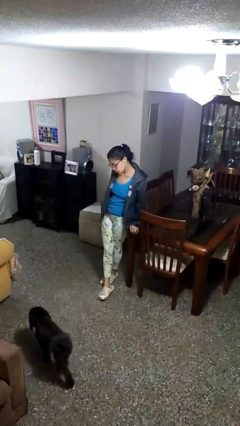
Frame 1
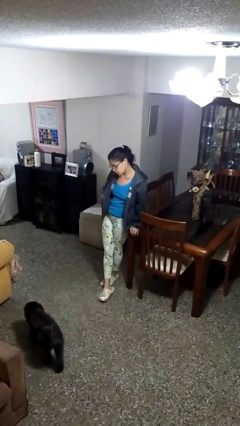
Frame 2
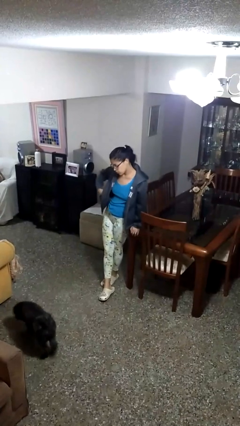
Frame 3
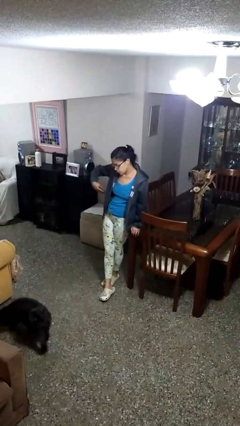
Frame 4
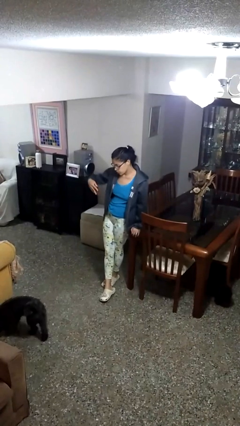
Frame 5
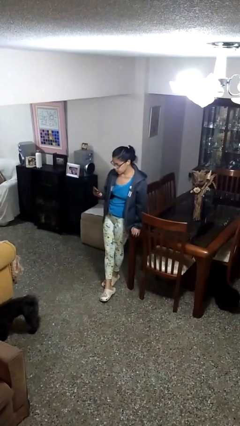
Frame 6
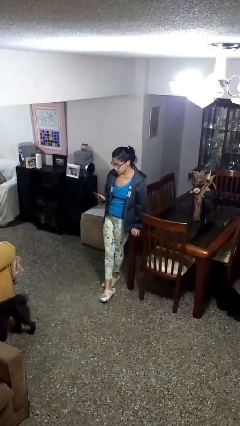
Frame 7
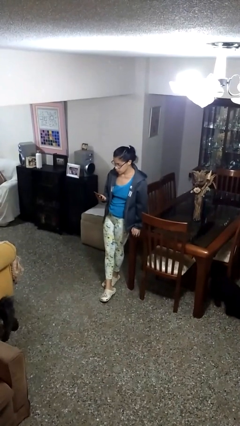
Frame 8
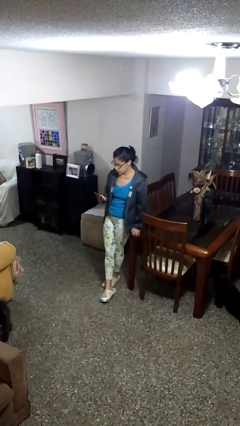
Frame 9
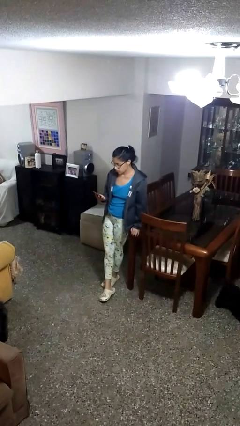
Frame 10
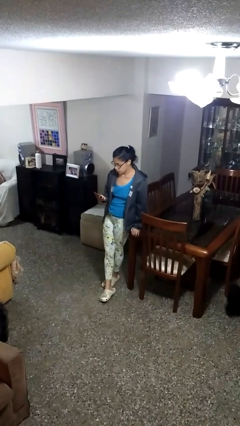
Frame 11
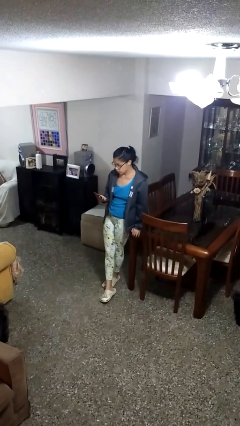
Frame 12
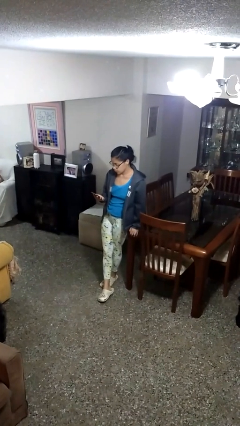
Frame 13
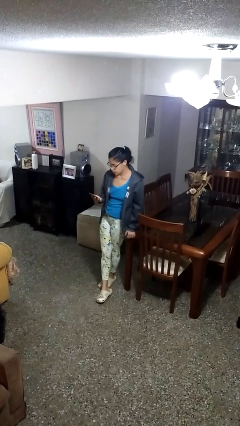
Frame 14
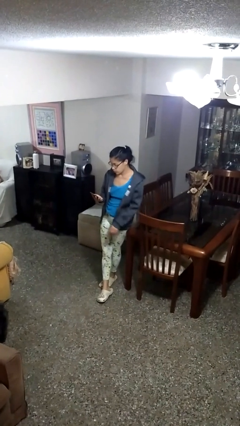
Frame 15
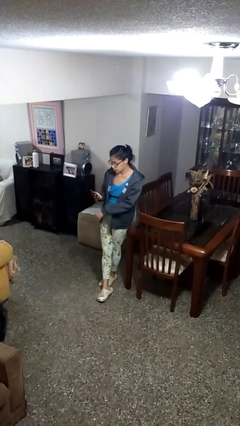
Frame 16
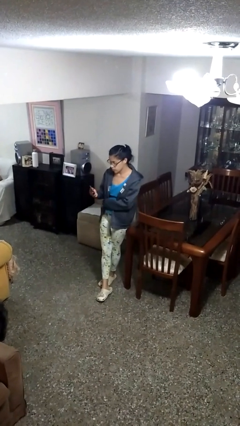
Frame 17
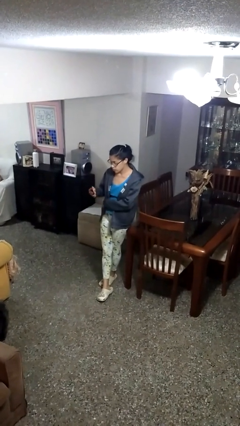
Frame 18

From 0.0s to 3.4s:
person takes phone from pocket

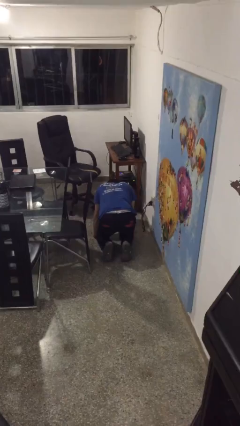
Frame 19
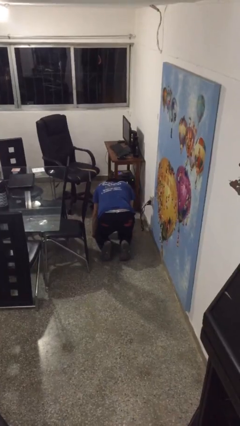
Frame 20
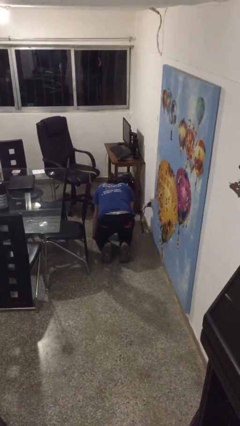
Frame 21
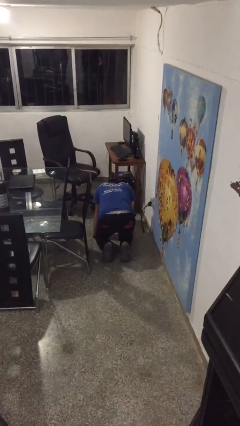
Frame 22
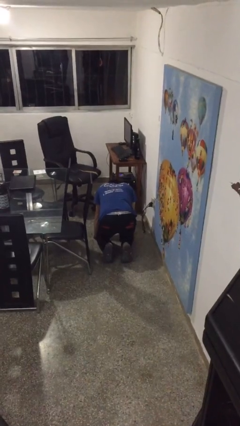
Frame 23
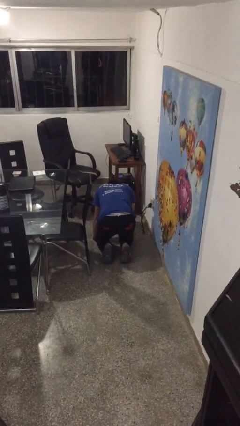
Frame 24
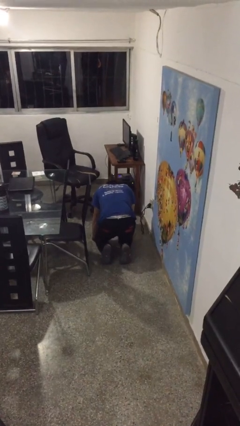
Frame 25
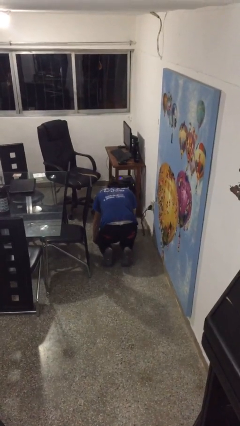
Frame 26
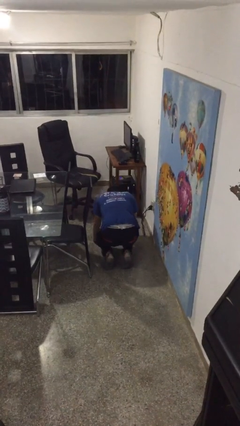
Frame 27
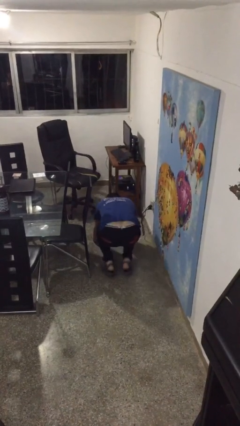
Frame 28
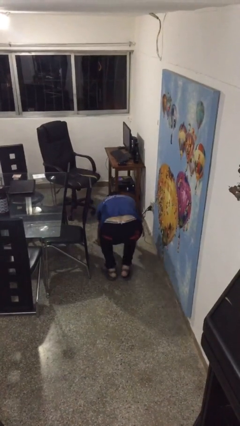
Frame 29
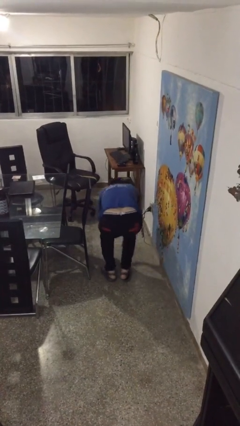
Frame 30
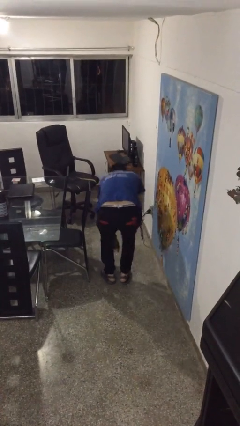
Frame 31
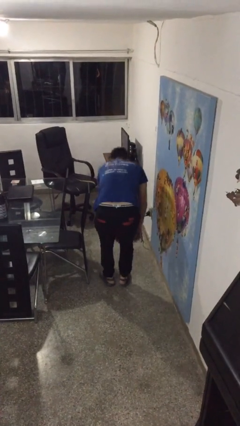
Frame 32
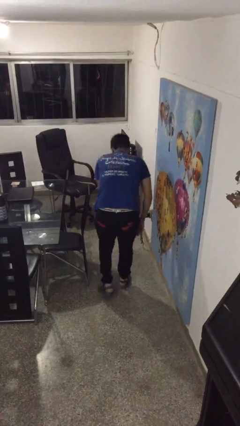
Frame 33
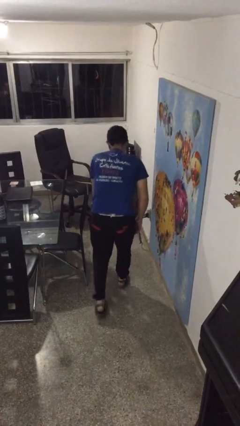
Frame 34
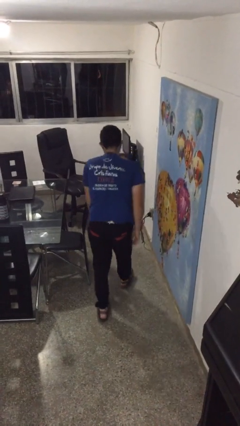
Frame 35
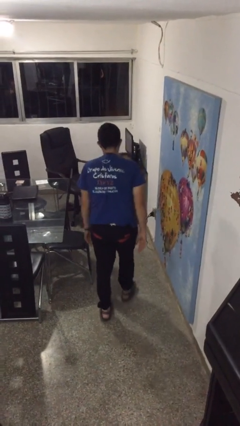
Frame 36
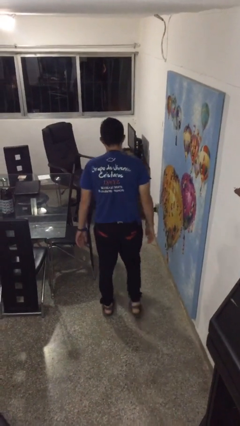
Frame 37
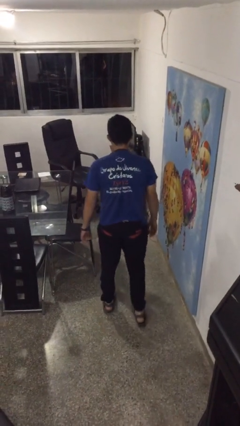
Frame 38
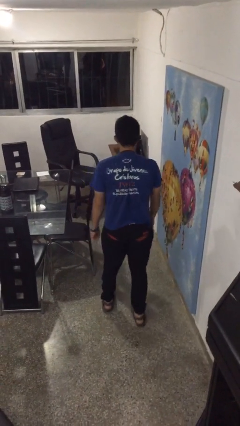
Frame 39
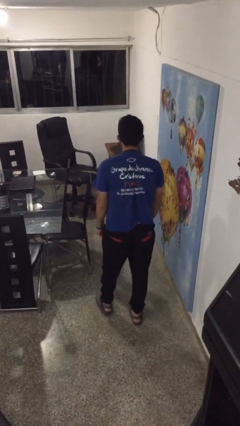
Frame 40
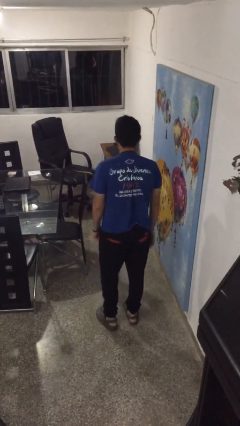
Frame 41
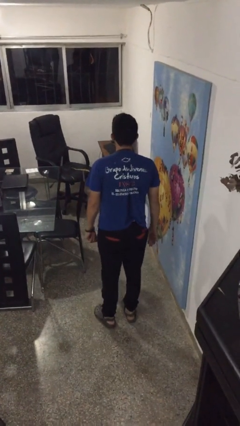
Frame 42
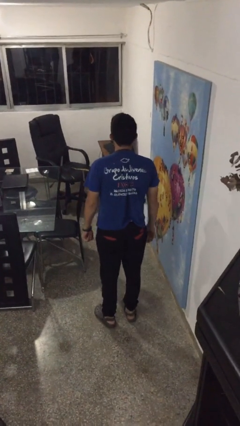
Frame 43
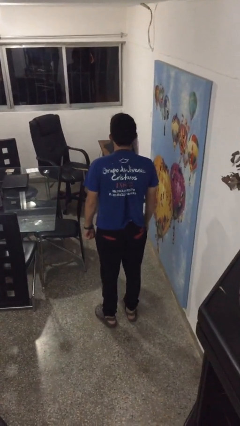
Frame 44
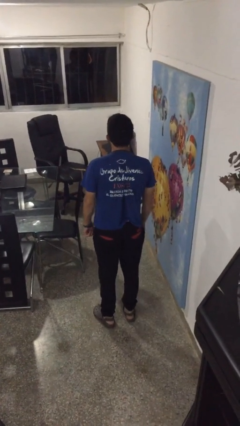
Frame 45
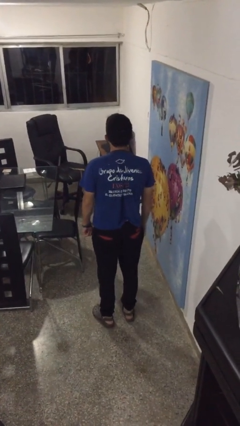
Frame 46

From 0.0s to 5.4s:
person stands up from floor

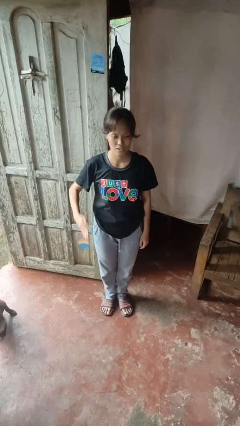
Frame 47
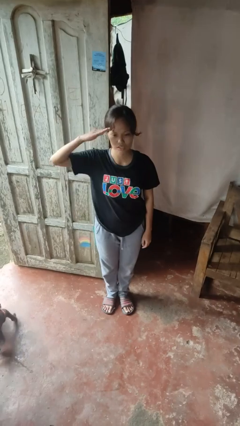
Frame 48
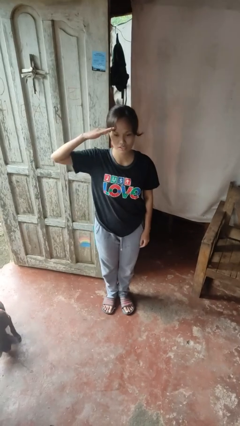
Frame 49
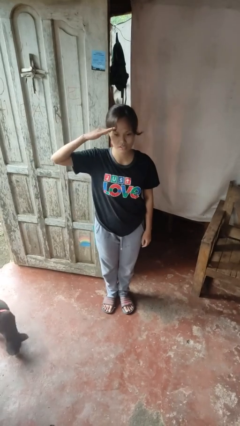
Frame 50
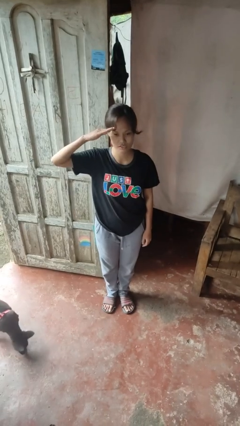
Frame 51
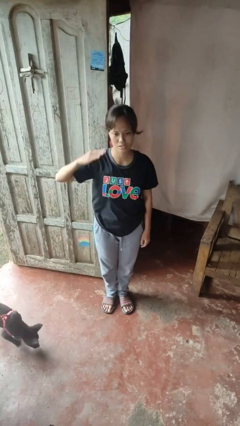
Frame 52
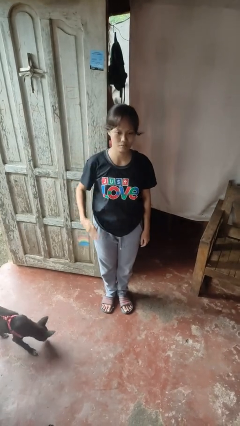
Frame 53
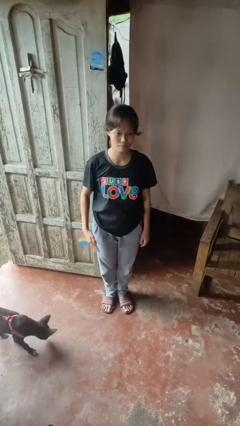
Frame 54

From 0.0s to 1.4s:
person salutes

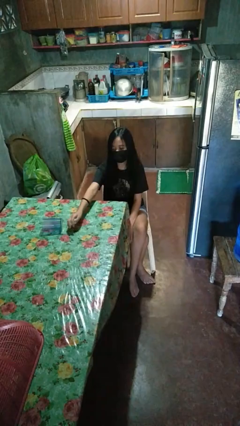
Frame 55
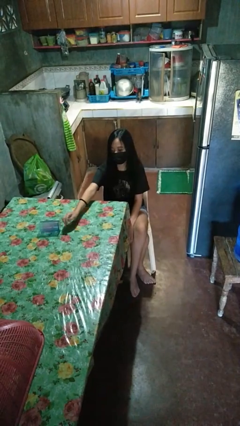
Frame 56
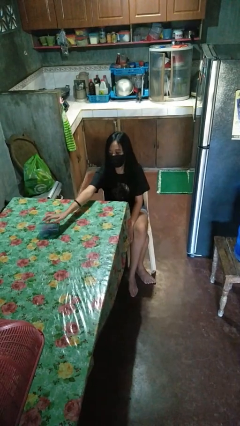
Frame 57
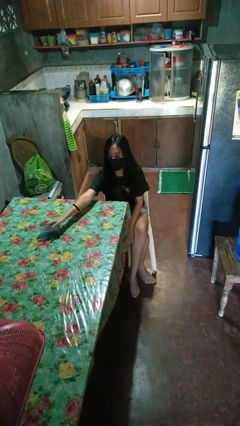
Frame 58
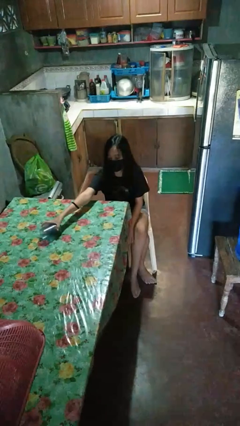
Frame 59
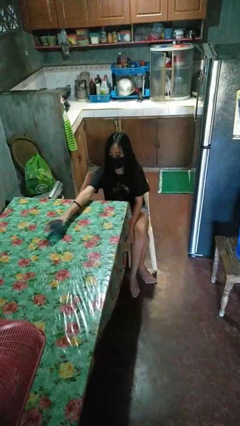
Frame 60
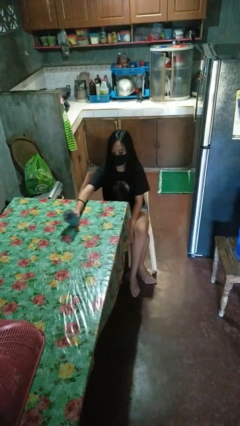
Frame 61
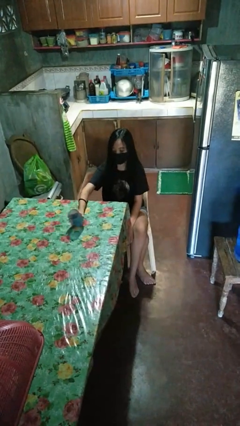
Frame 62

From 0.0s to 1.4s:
person sets upright glass

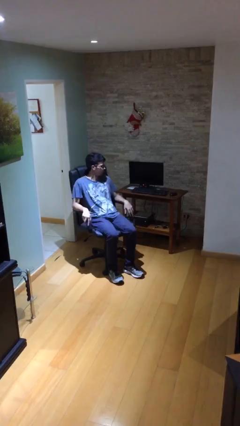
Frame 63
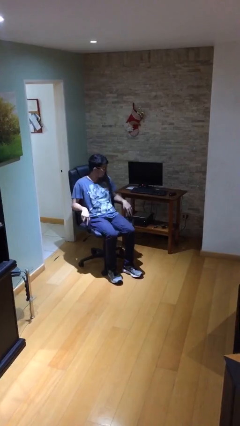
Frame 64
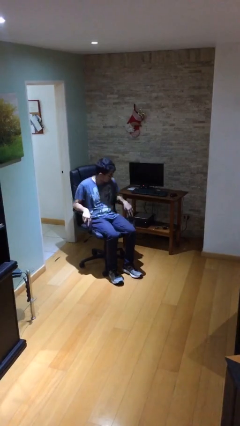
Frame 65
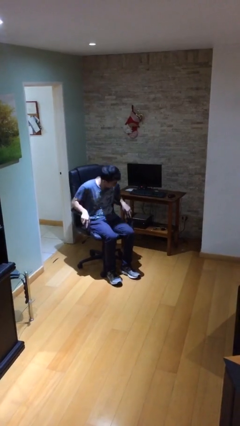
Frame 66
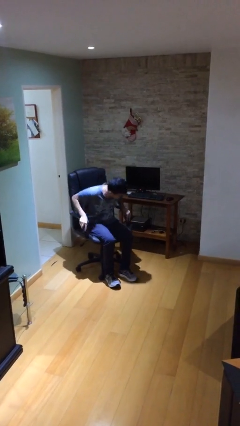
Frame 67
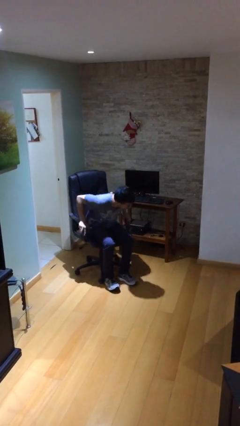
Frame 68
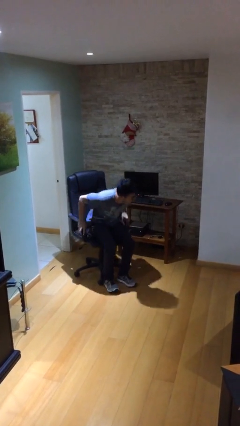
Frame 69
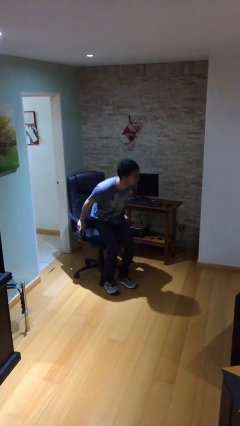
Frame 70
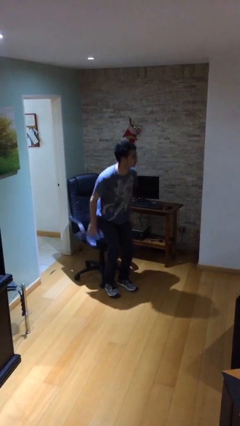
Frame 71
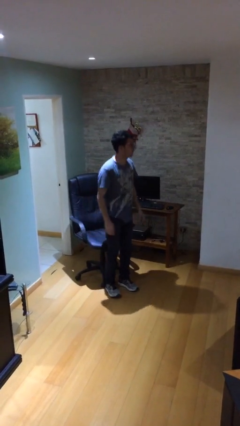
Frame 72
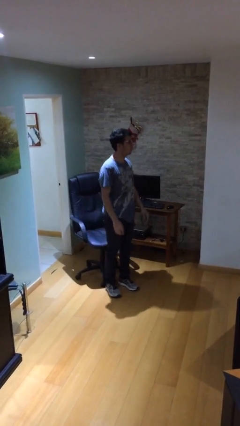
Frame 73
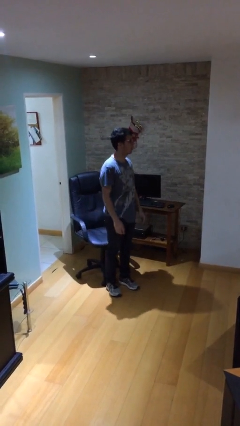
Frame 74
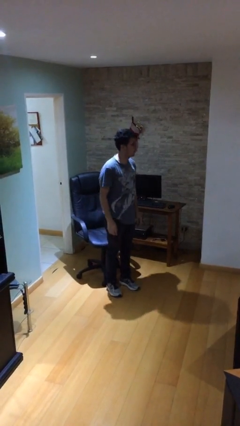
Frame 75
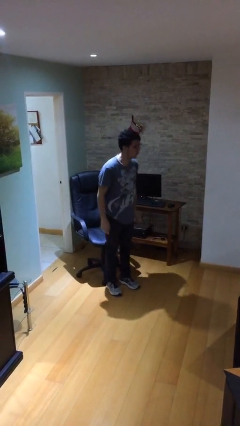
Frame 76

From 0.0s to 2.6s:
person stands up

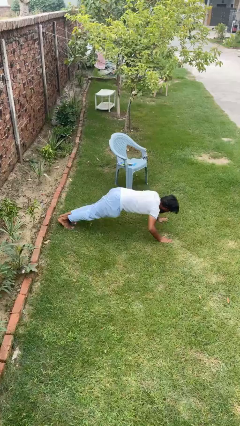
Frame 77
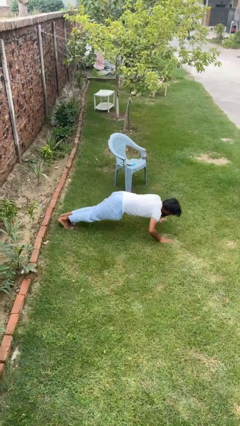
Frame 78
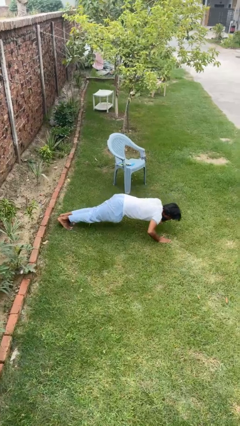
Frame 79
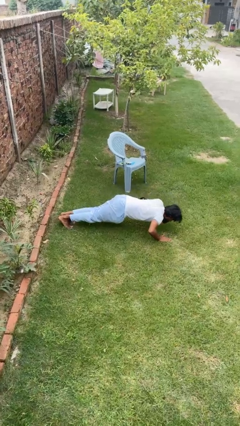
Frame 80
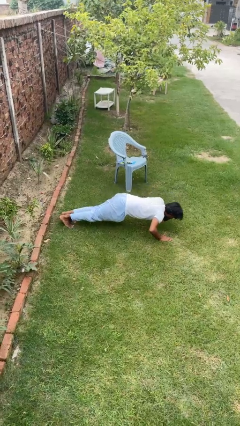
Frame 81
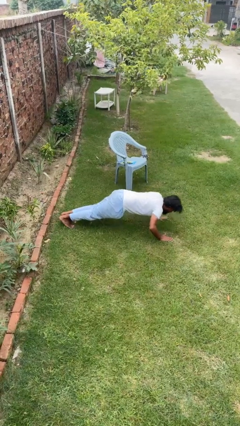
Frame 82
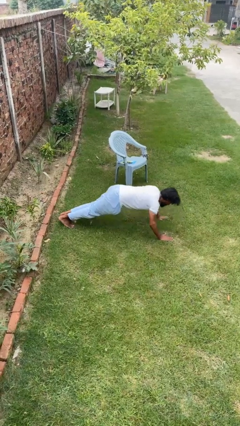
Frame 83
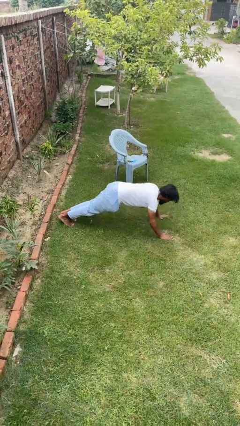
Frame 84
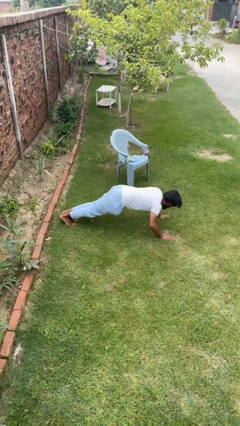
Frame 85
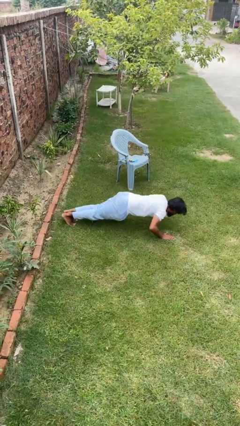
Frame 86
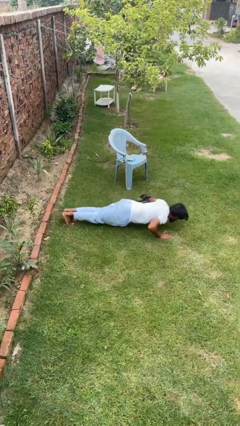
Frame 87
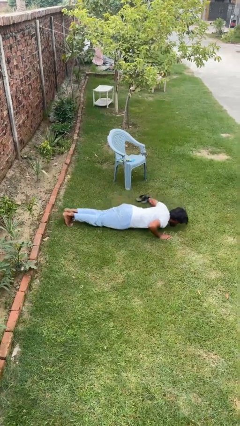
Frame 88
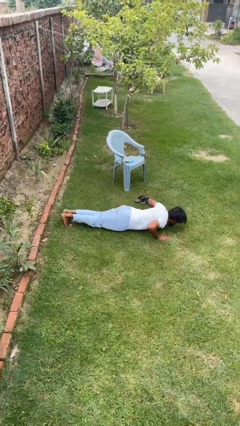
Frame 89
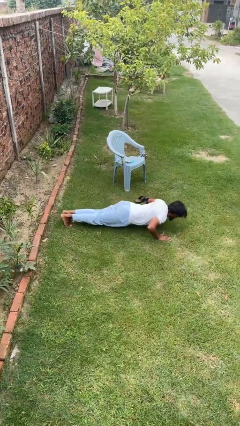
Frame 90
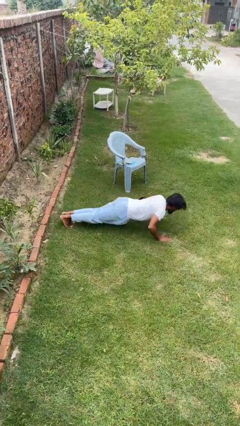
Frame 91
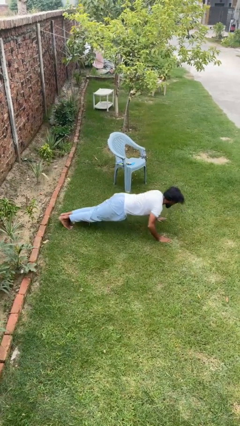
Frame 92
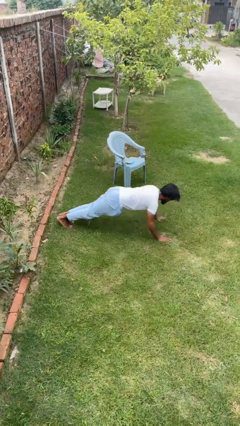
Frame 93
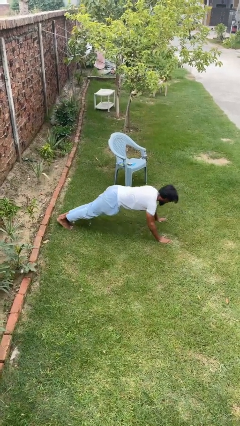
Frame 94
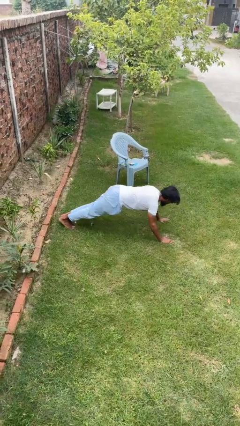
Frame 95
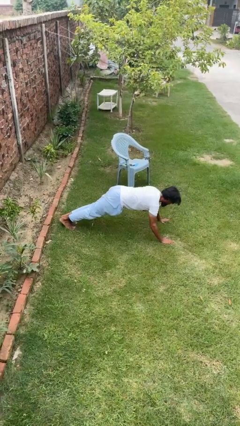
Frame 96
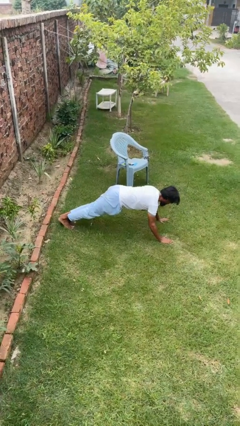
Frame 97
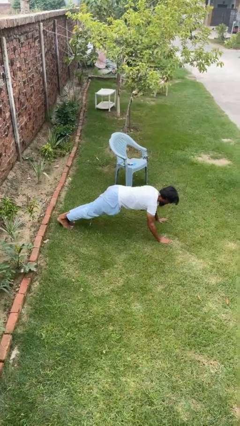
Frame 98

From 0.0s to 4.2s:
person exercises with pushup
